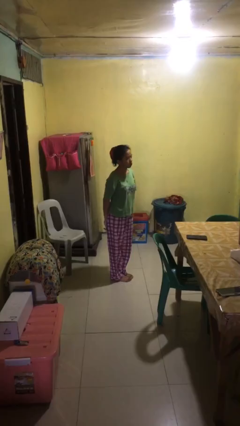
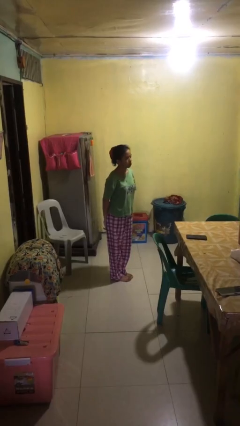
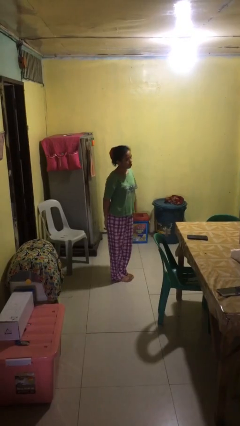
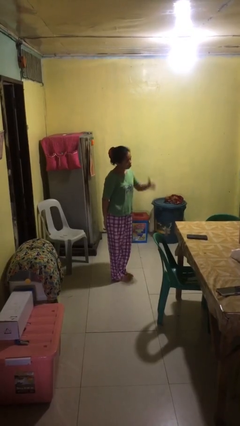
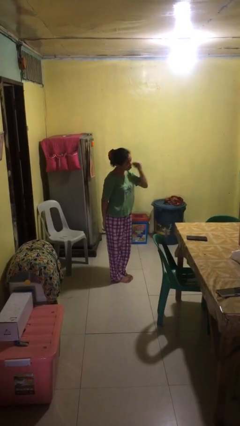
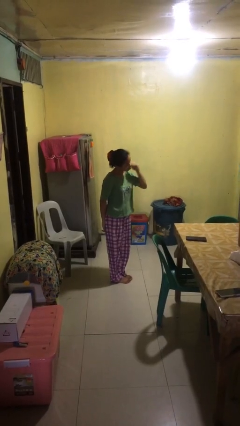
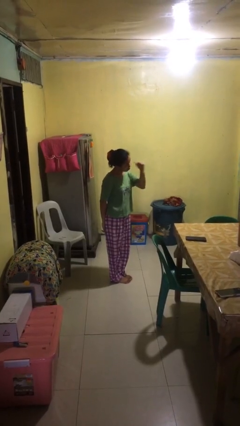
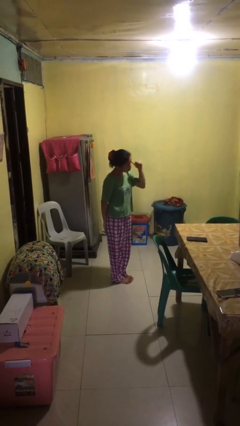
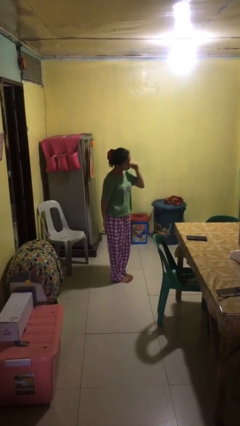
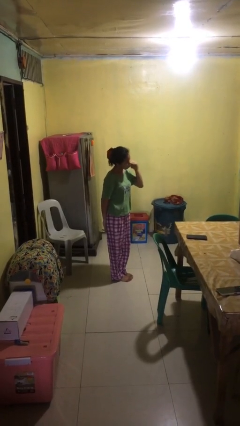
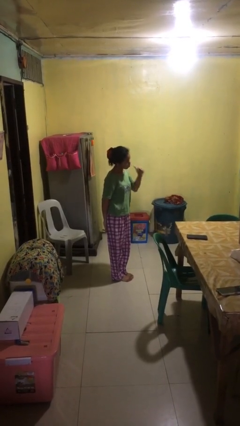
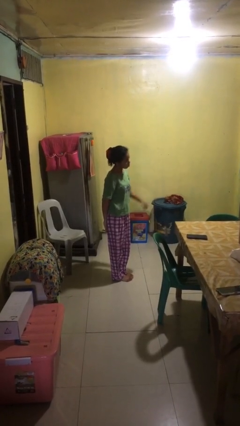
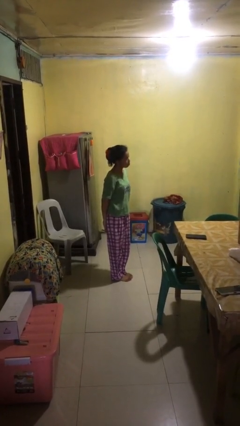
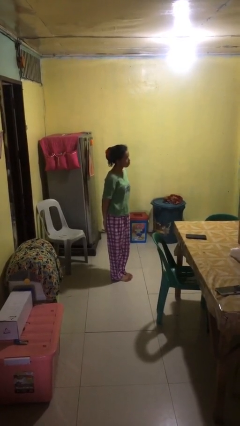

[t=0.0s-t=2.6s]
person gestures behind me

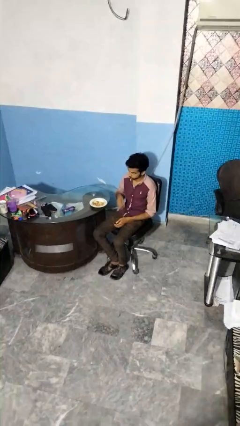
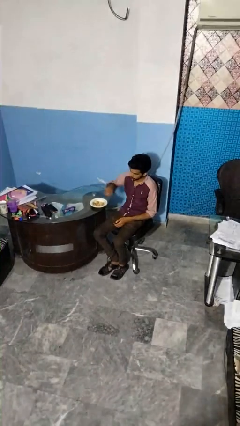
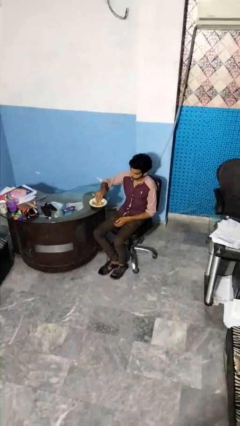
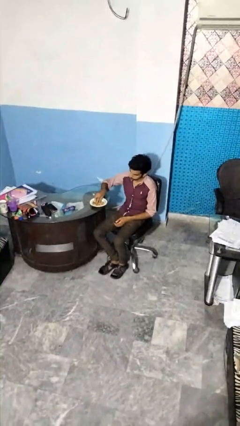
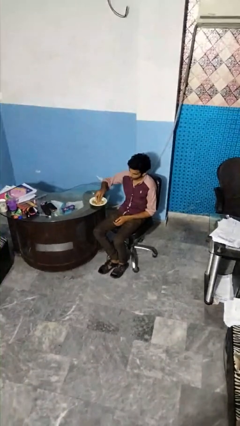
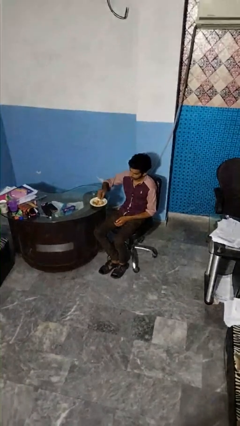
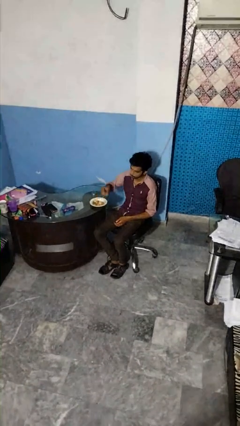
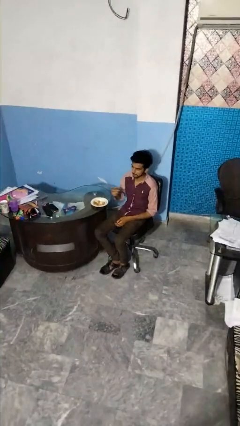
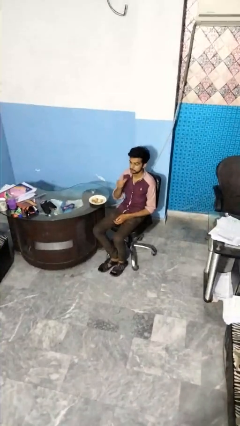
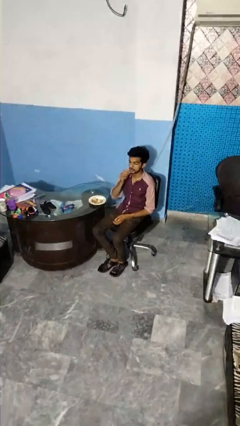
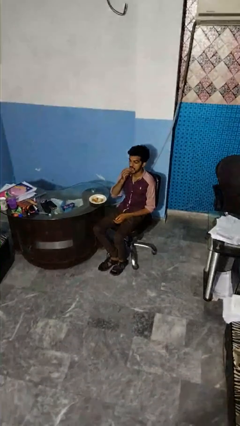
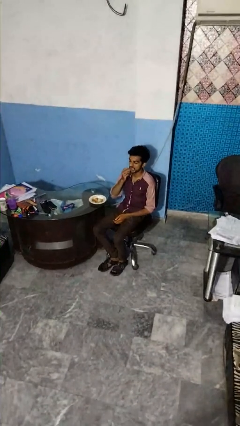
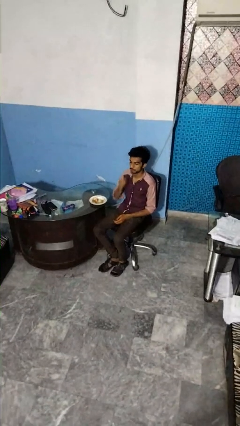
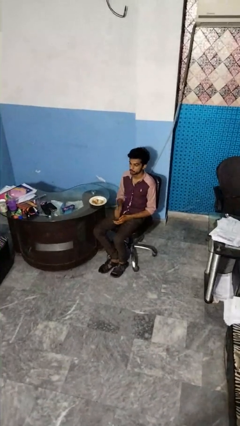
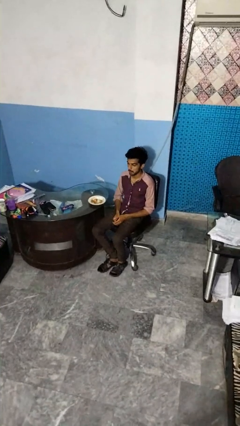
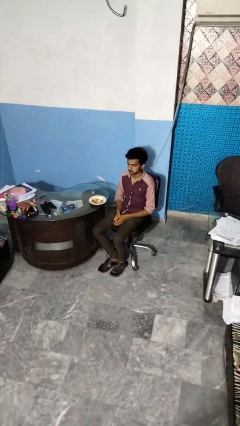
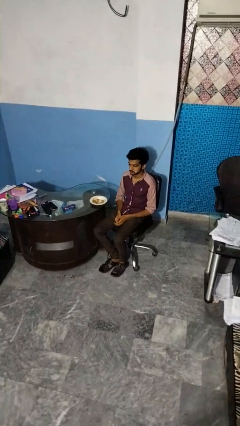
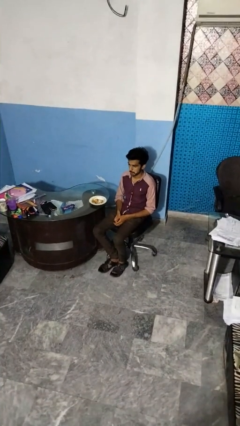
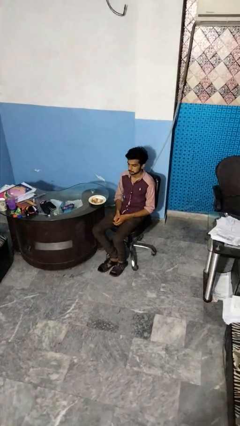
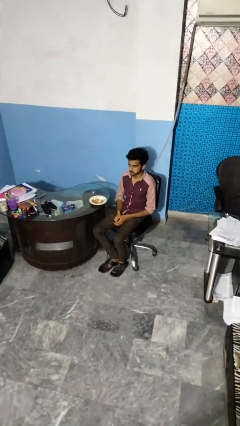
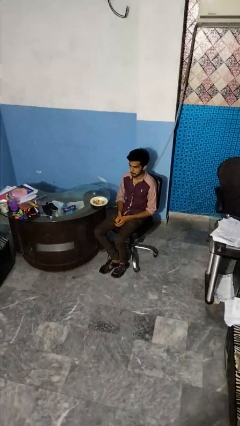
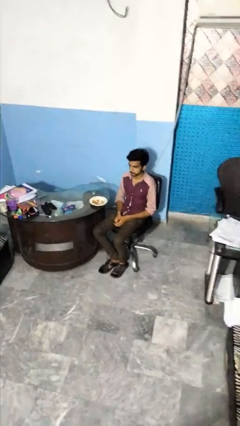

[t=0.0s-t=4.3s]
person eats with hands

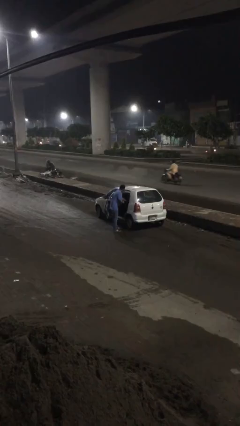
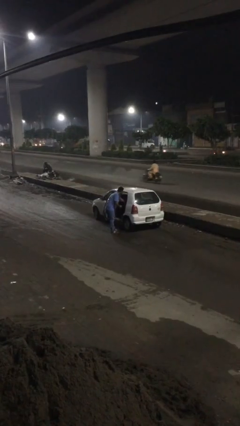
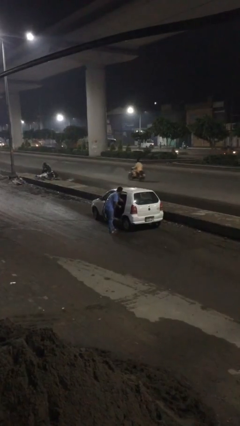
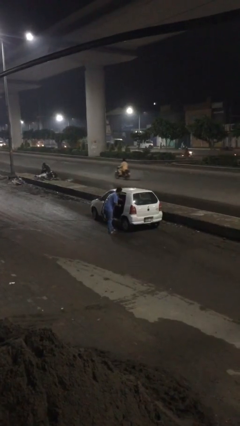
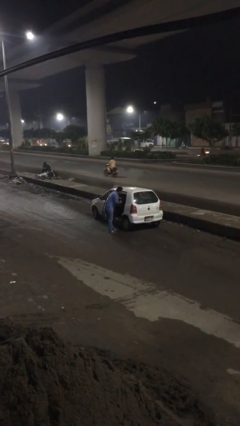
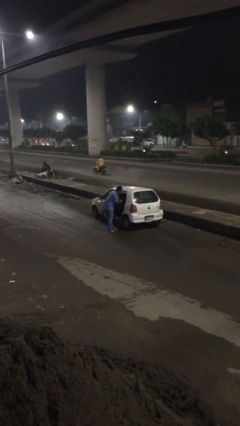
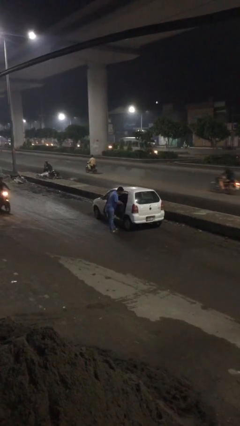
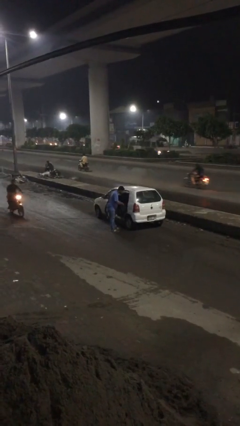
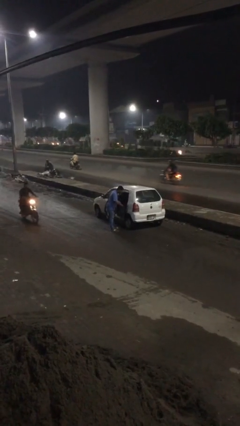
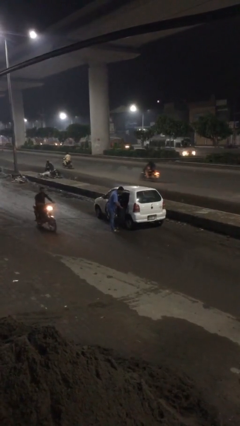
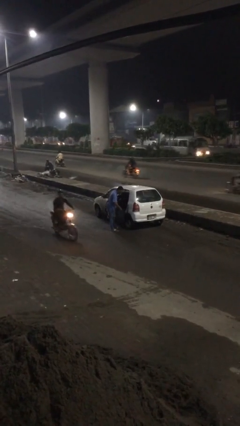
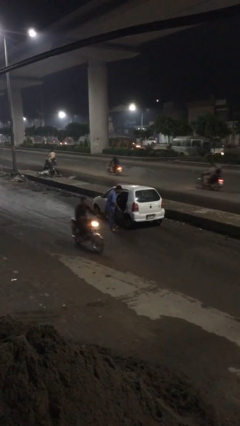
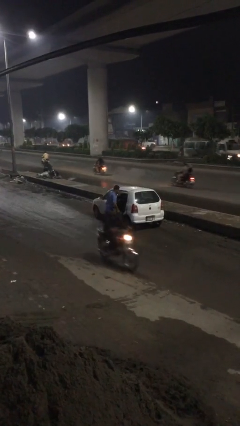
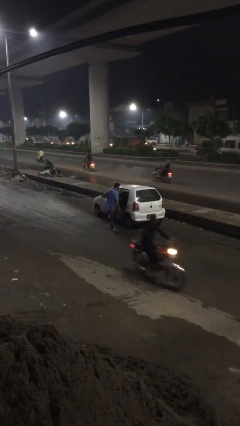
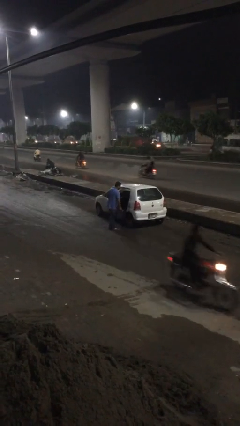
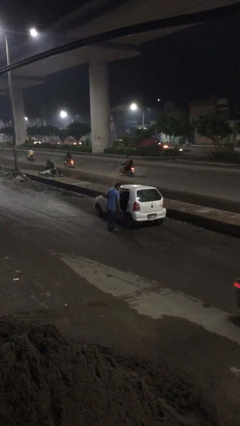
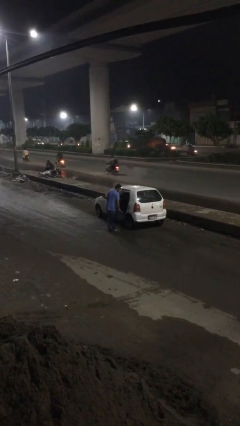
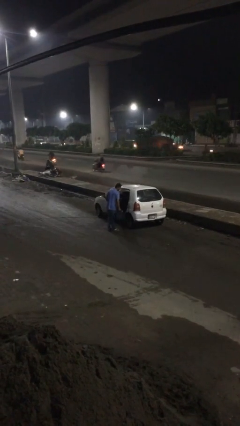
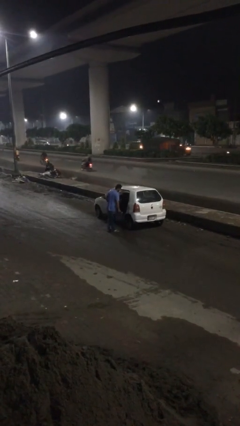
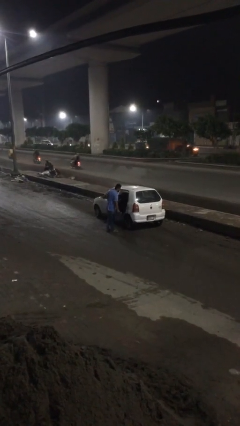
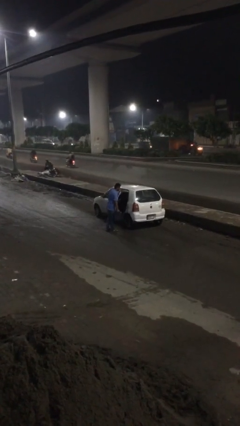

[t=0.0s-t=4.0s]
person unloads car

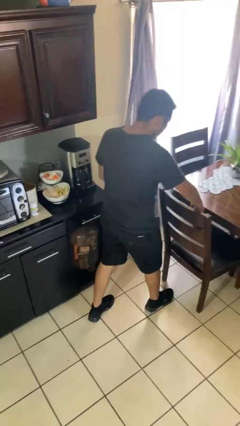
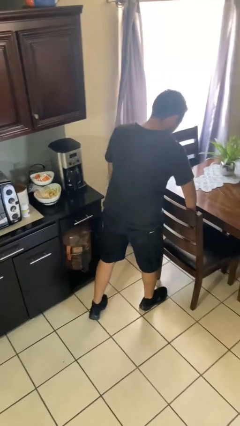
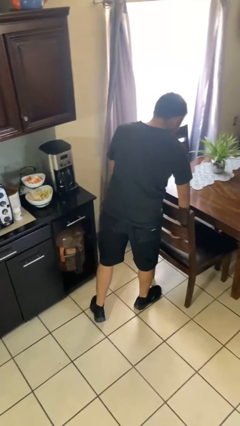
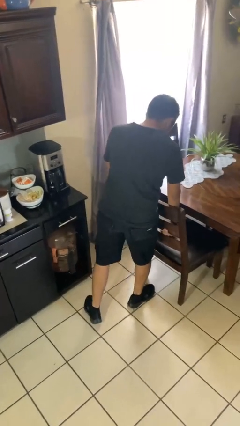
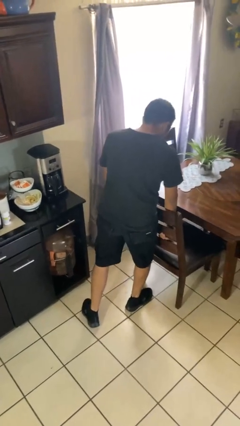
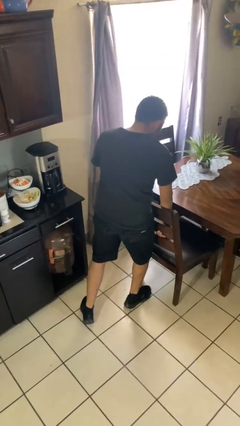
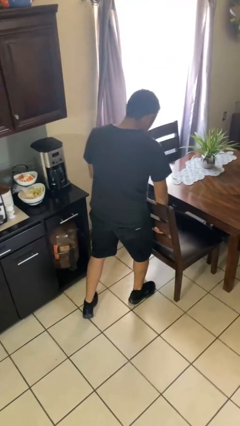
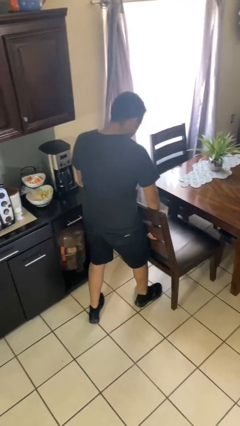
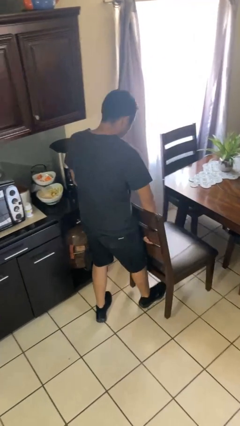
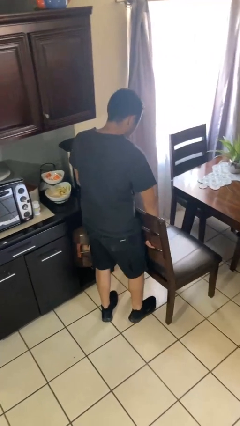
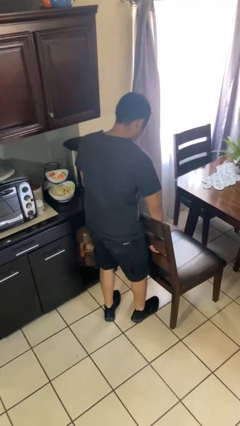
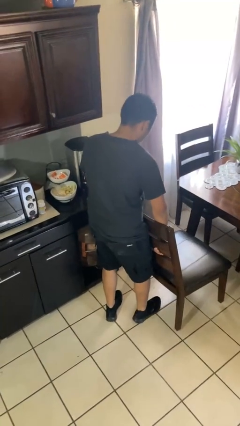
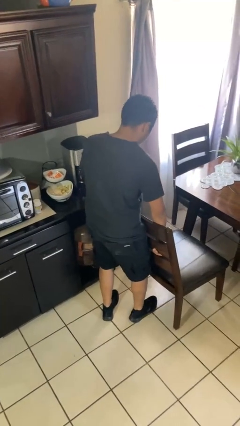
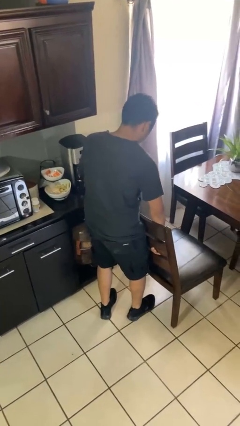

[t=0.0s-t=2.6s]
person pulls out chair

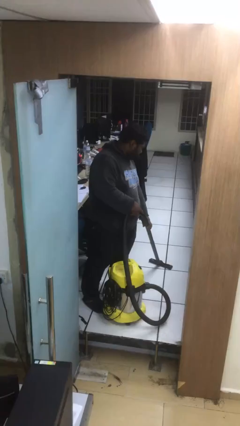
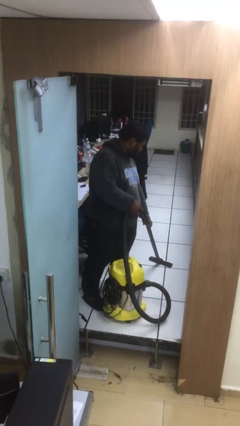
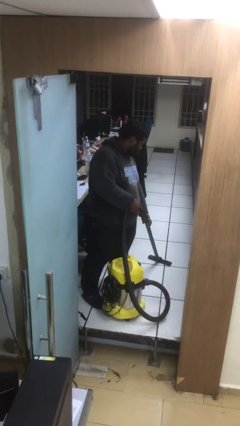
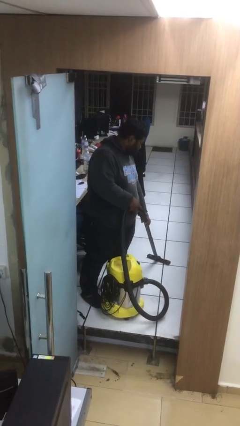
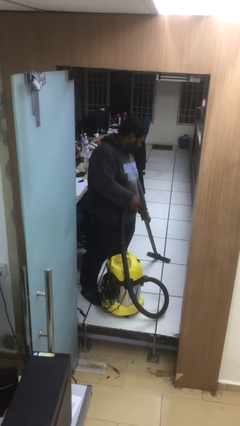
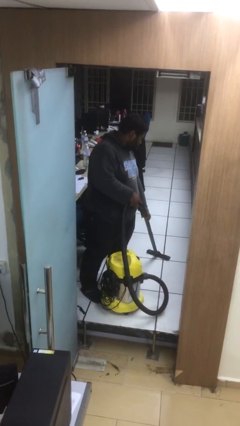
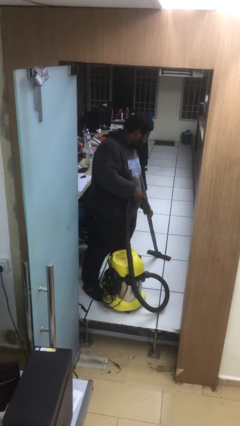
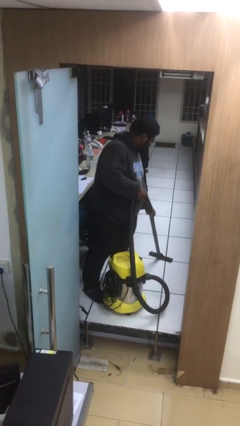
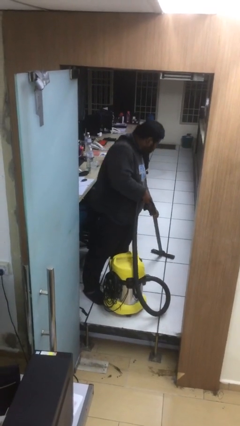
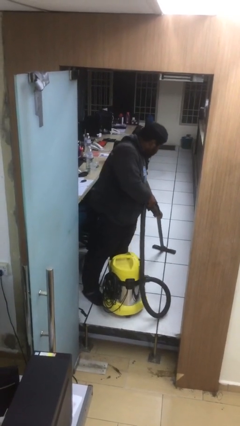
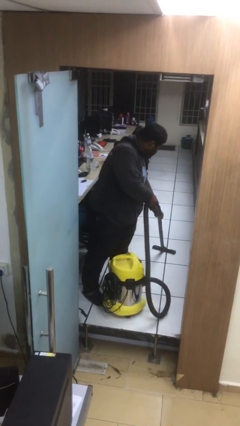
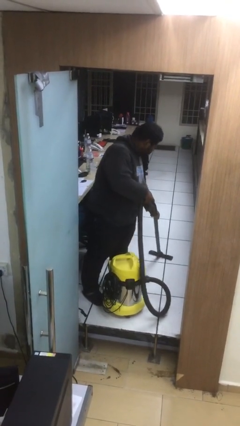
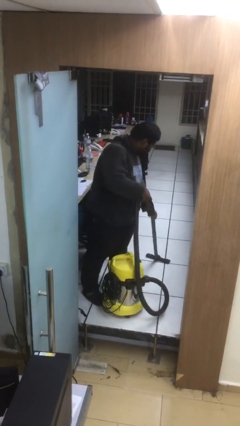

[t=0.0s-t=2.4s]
person vacuums carpet

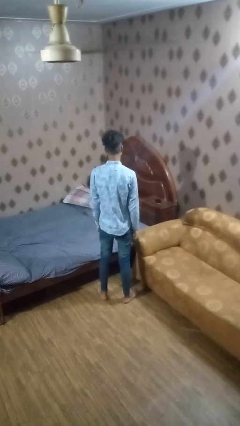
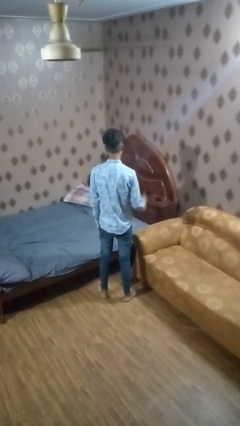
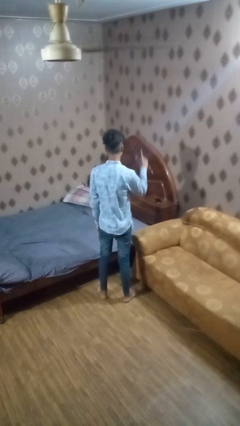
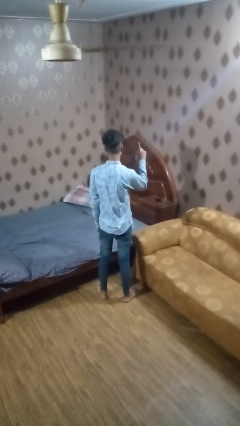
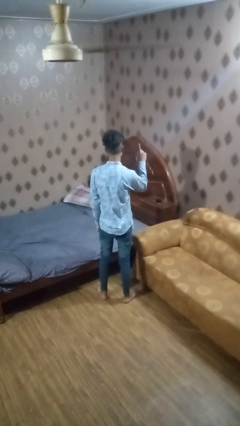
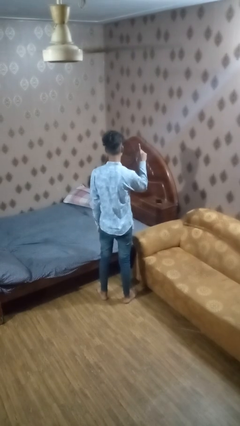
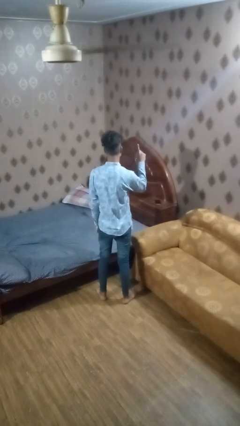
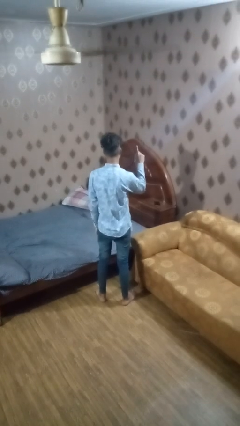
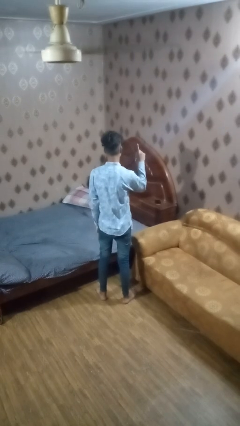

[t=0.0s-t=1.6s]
person gestures number one

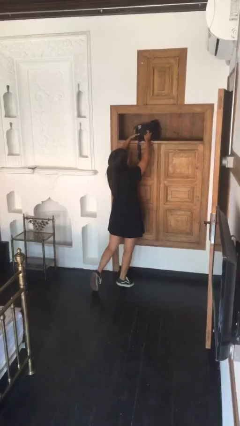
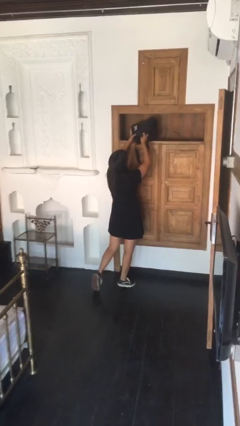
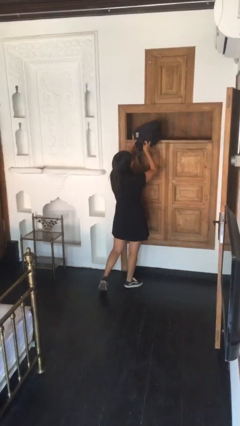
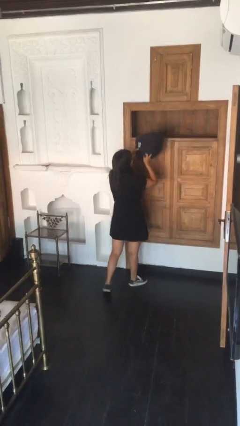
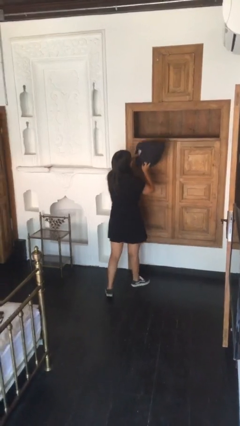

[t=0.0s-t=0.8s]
person picks up object from shelf
